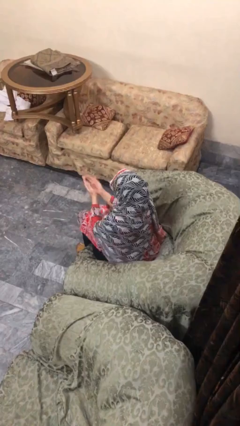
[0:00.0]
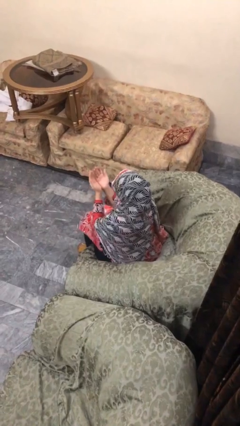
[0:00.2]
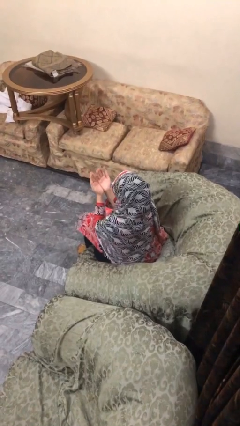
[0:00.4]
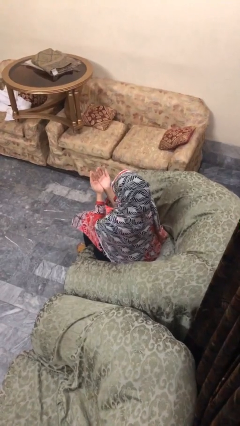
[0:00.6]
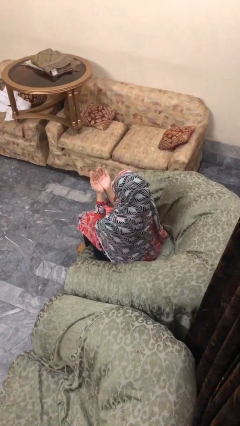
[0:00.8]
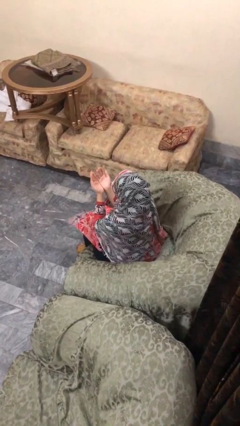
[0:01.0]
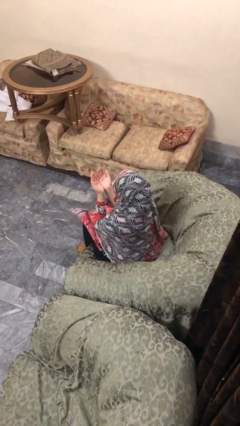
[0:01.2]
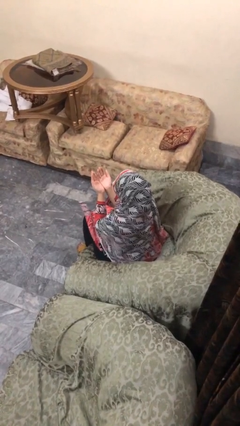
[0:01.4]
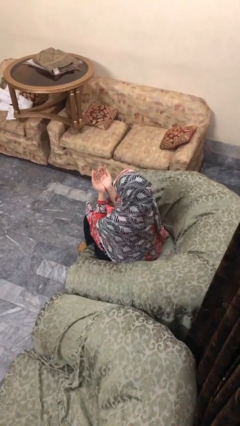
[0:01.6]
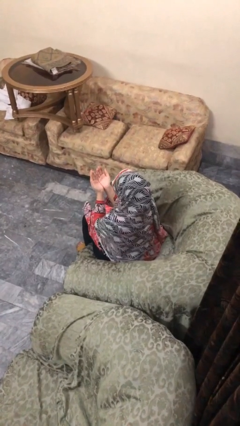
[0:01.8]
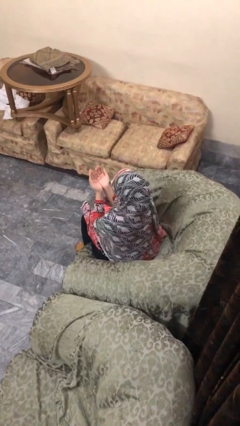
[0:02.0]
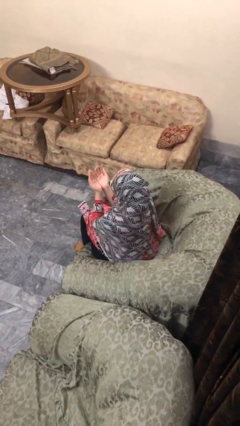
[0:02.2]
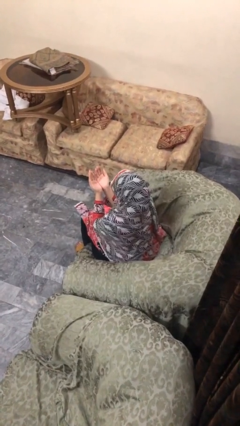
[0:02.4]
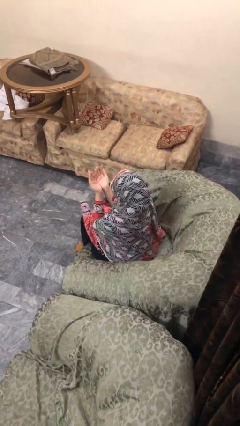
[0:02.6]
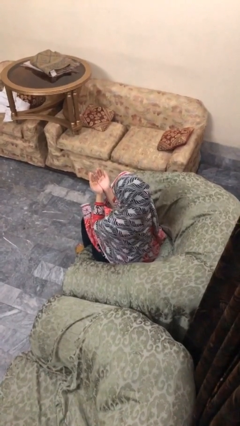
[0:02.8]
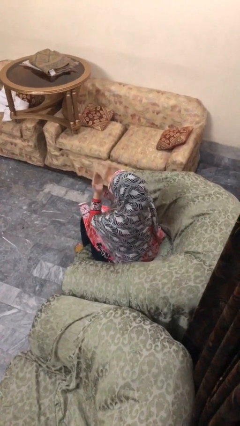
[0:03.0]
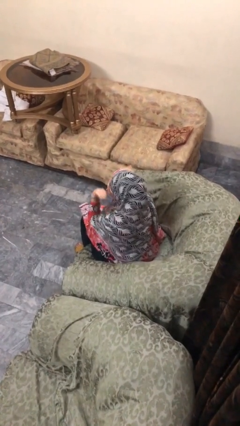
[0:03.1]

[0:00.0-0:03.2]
person prays

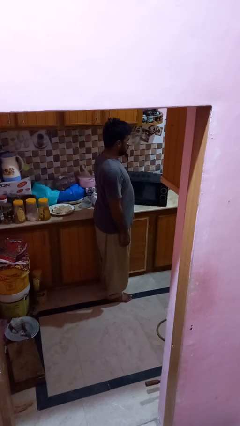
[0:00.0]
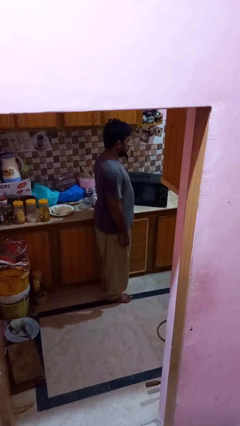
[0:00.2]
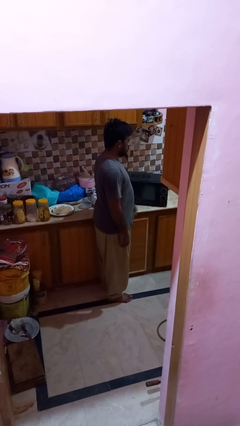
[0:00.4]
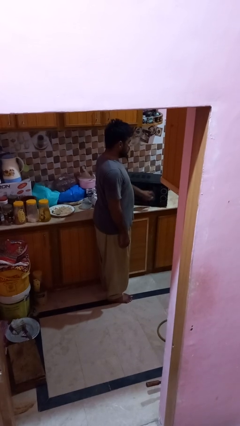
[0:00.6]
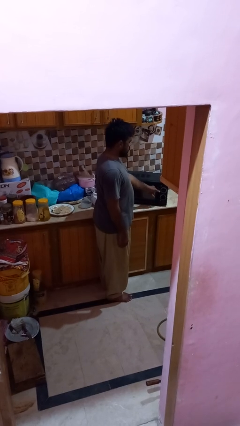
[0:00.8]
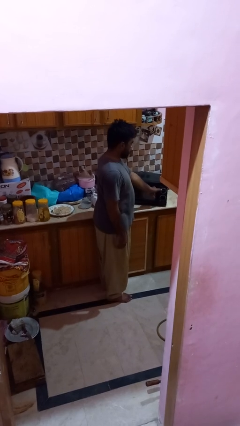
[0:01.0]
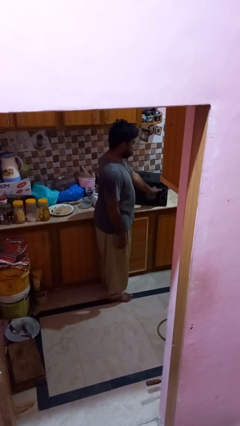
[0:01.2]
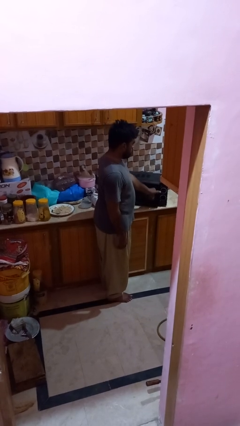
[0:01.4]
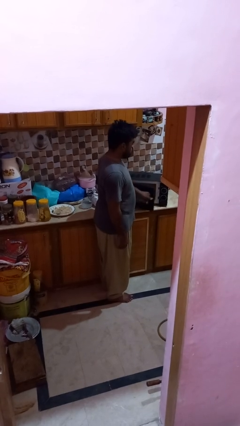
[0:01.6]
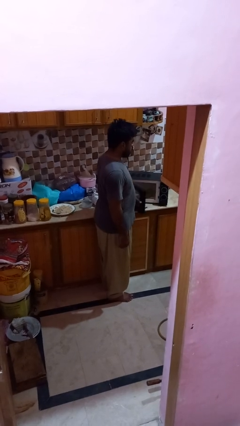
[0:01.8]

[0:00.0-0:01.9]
person opens microwave

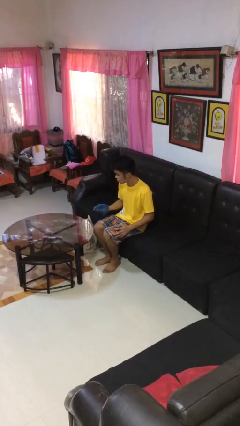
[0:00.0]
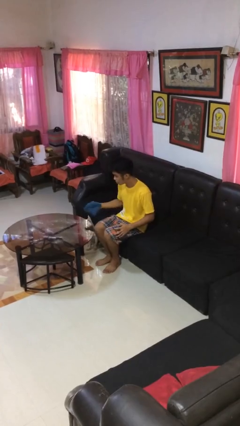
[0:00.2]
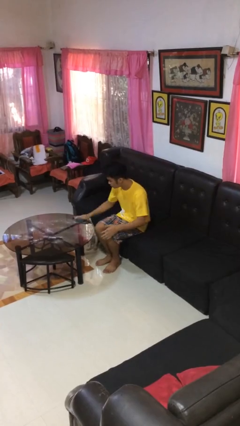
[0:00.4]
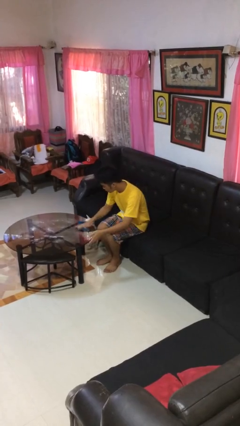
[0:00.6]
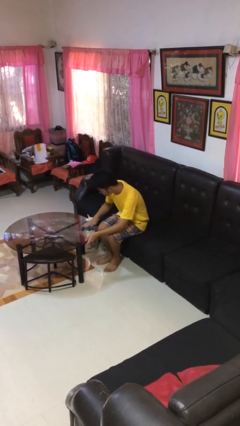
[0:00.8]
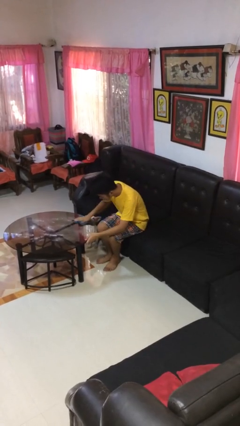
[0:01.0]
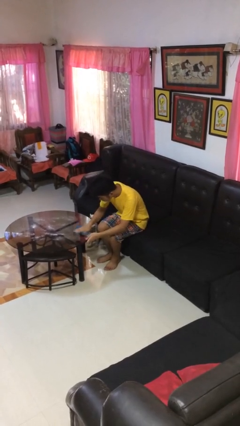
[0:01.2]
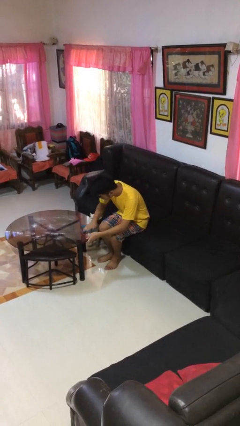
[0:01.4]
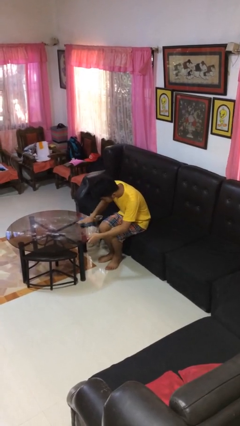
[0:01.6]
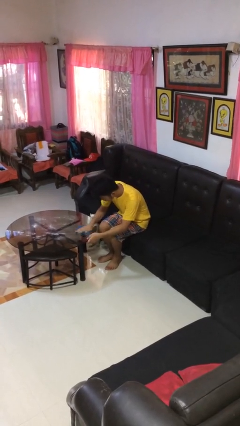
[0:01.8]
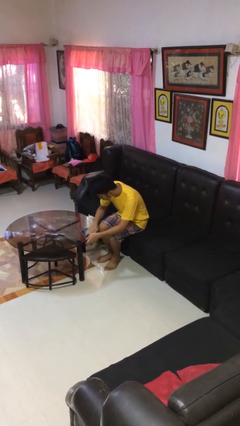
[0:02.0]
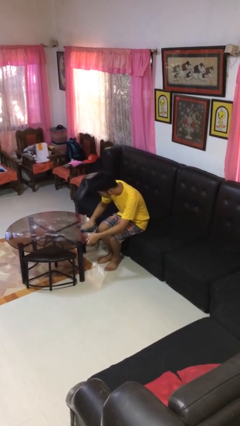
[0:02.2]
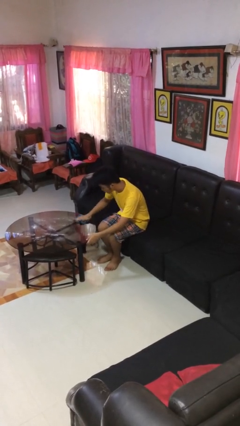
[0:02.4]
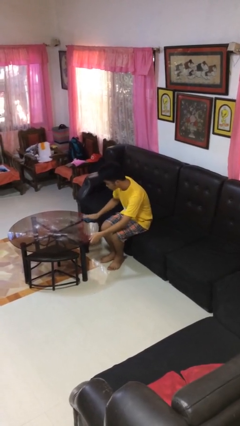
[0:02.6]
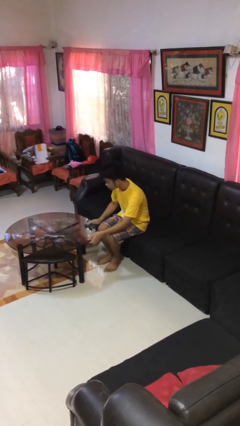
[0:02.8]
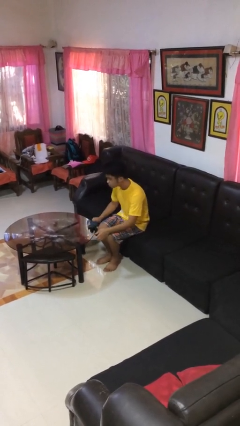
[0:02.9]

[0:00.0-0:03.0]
person cleans table with rag

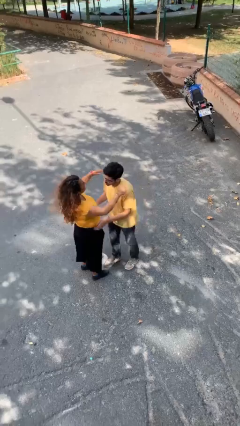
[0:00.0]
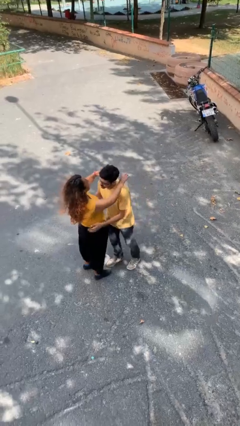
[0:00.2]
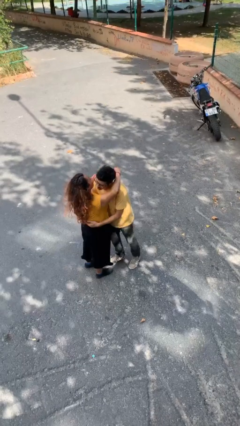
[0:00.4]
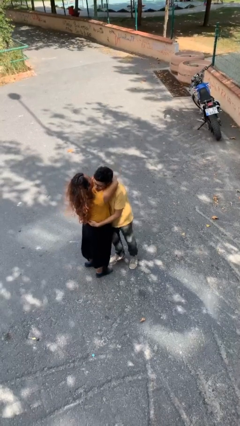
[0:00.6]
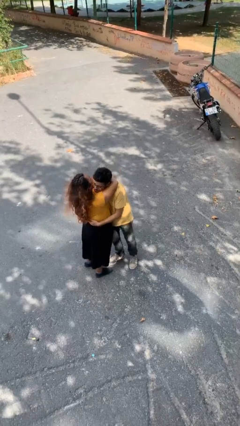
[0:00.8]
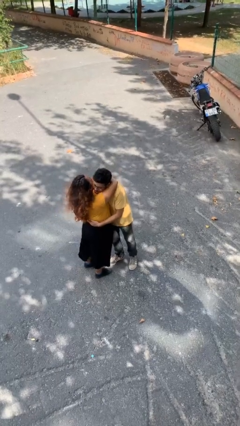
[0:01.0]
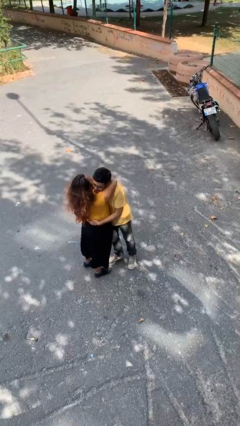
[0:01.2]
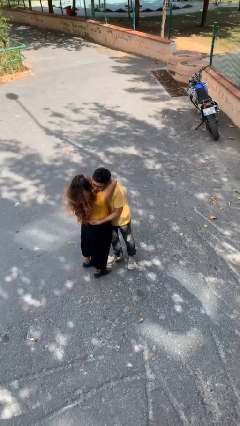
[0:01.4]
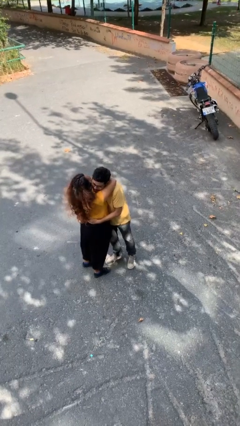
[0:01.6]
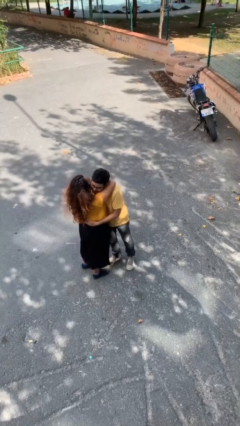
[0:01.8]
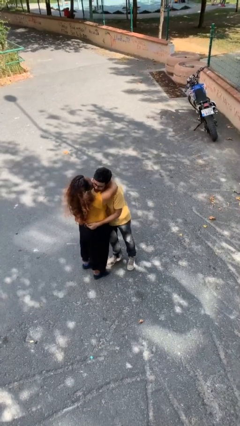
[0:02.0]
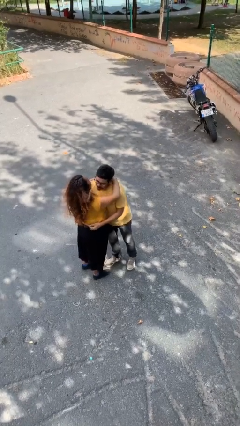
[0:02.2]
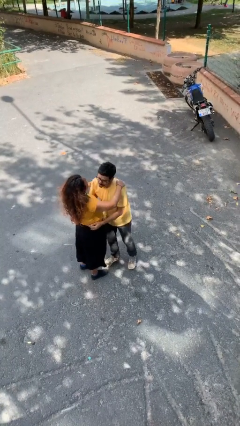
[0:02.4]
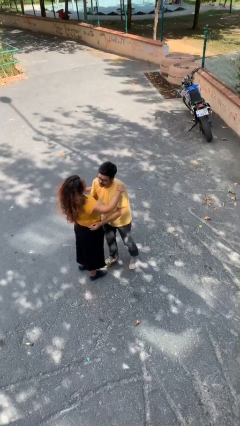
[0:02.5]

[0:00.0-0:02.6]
person embraces person

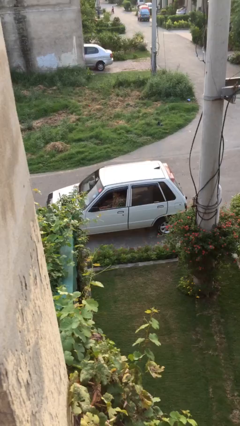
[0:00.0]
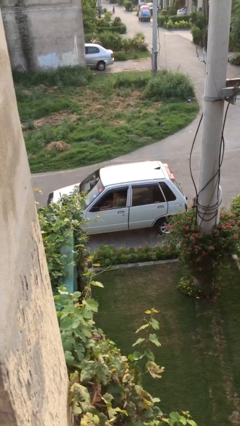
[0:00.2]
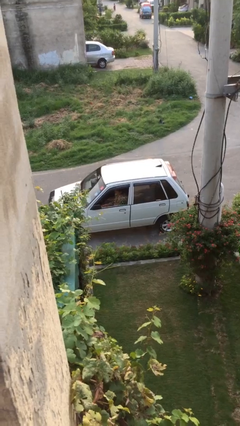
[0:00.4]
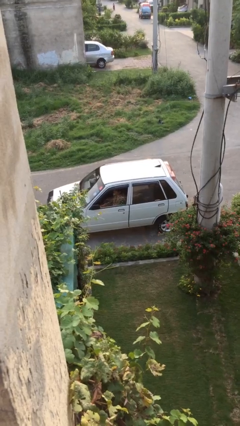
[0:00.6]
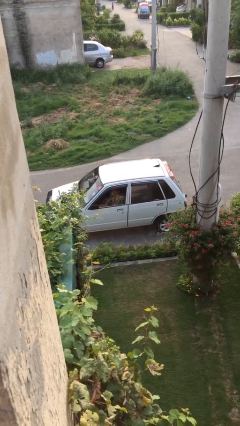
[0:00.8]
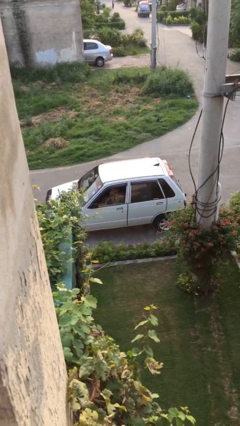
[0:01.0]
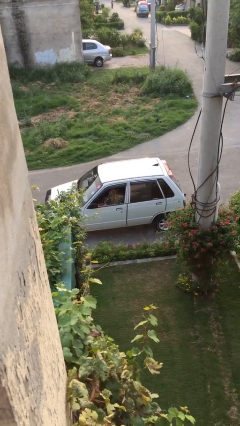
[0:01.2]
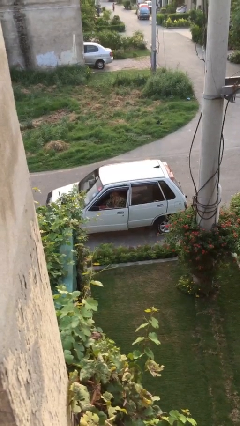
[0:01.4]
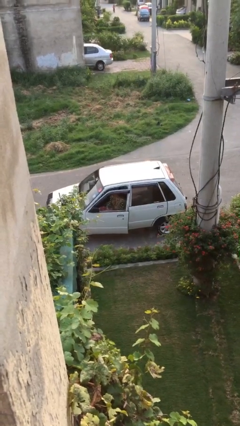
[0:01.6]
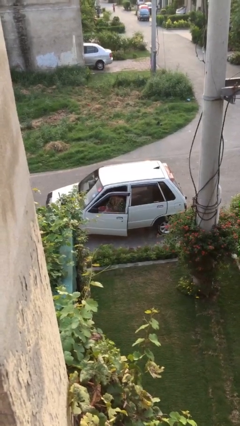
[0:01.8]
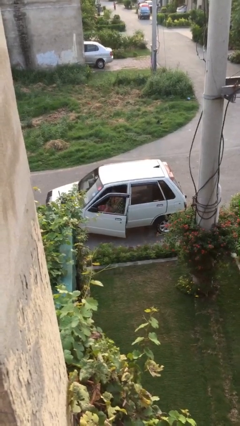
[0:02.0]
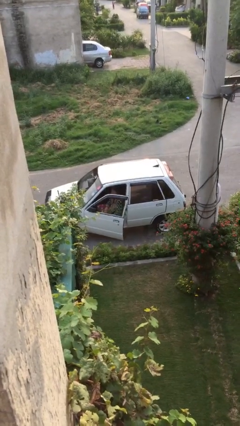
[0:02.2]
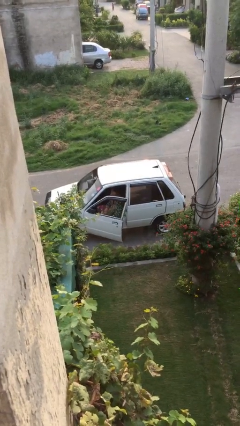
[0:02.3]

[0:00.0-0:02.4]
person opens car door

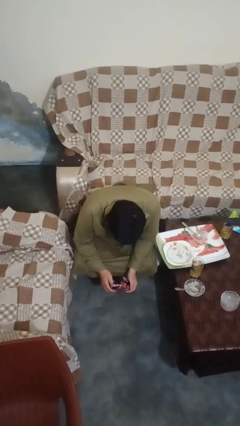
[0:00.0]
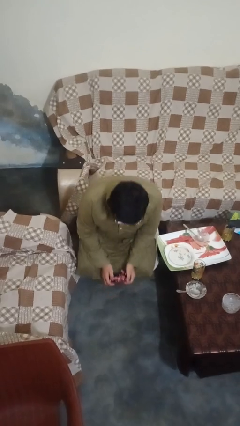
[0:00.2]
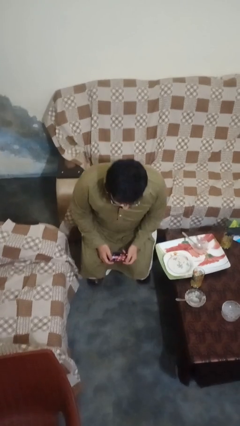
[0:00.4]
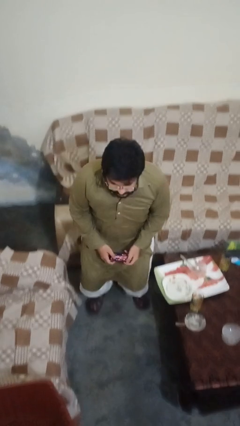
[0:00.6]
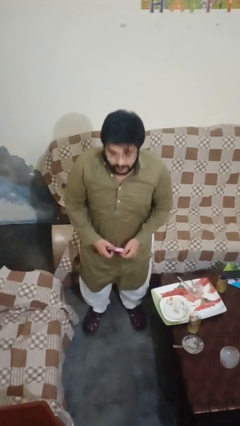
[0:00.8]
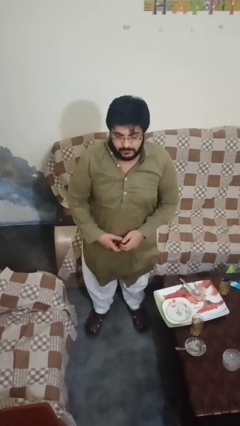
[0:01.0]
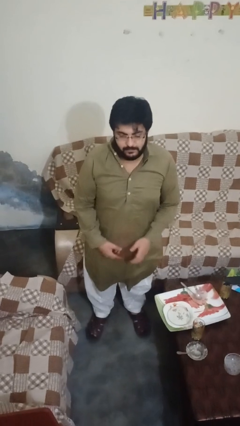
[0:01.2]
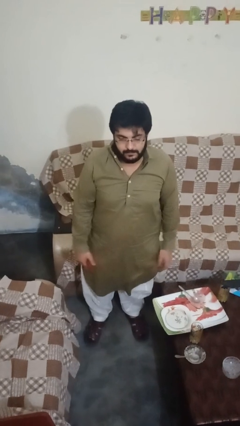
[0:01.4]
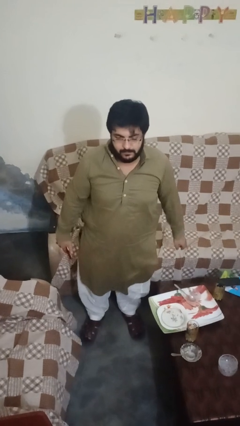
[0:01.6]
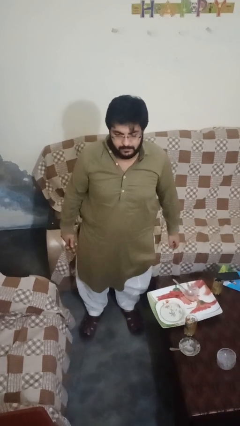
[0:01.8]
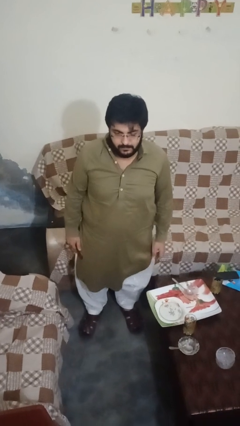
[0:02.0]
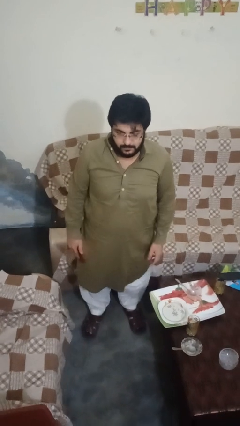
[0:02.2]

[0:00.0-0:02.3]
person stands up

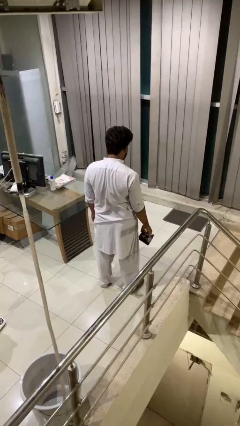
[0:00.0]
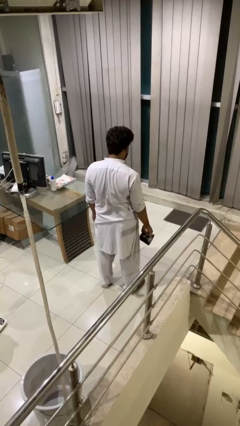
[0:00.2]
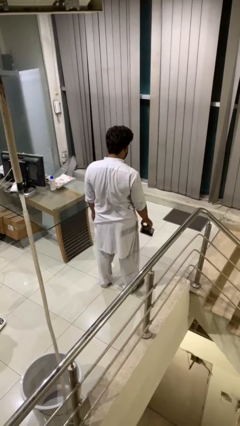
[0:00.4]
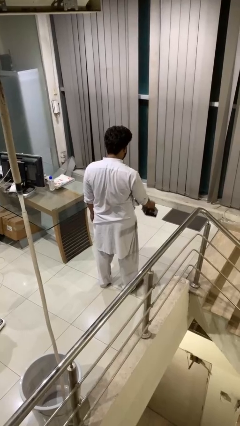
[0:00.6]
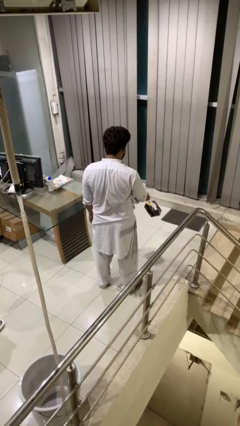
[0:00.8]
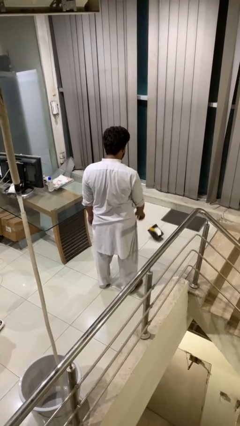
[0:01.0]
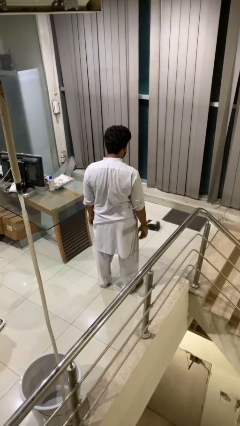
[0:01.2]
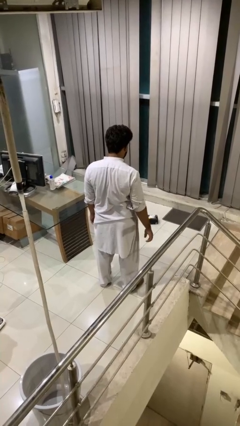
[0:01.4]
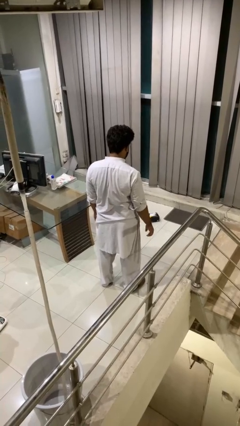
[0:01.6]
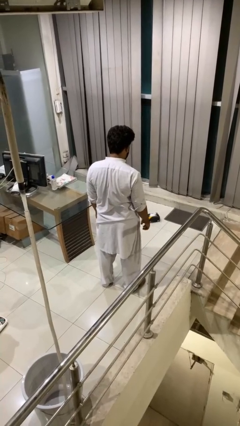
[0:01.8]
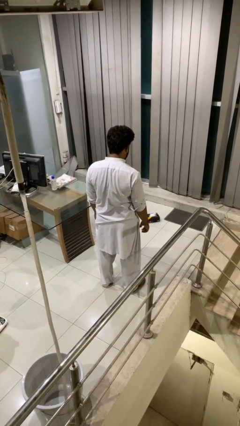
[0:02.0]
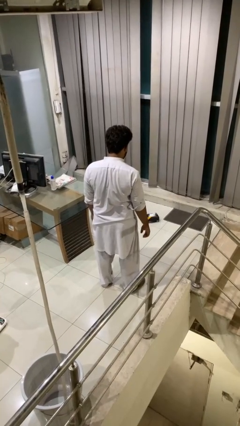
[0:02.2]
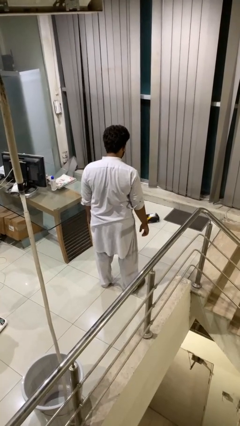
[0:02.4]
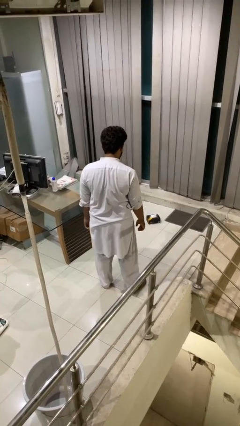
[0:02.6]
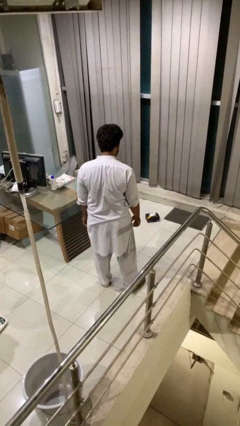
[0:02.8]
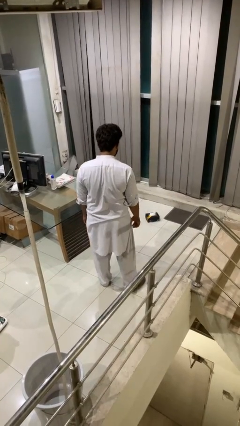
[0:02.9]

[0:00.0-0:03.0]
person throws object to ground
